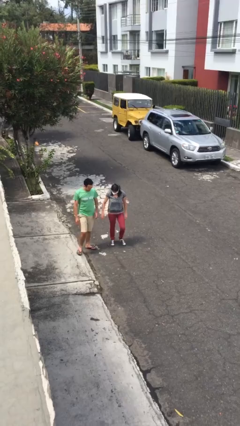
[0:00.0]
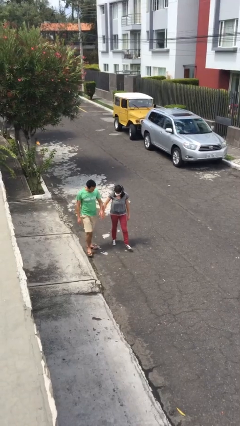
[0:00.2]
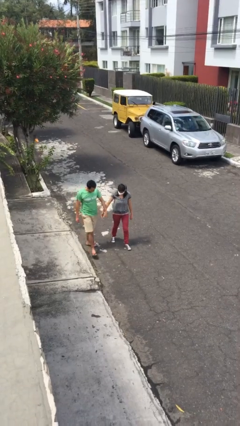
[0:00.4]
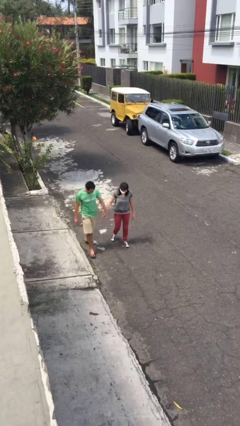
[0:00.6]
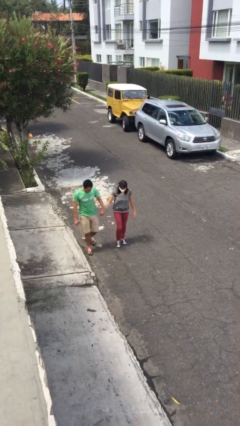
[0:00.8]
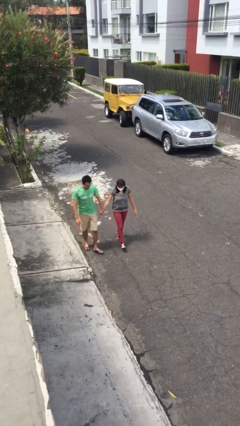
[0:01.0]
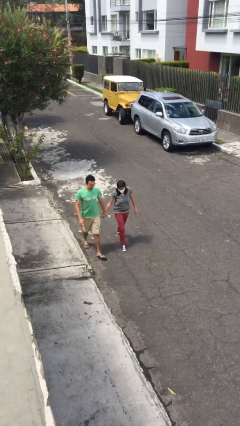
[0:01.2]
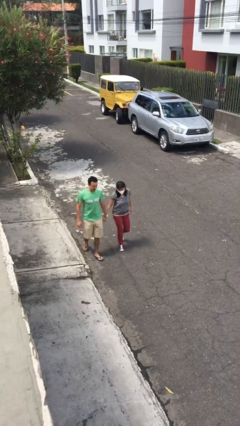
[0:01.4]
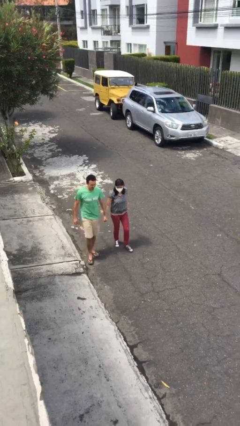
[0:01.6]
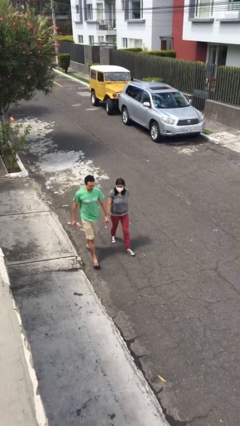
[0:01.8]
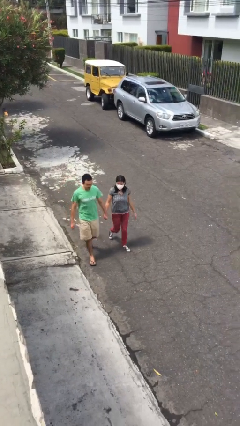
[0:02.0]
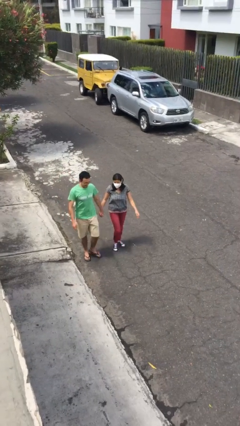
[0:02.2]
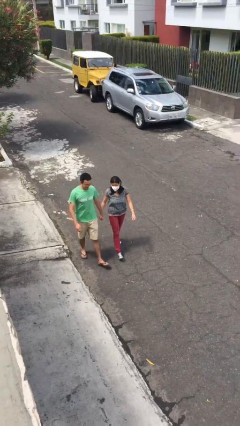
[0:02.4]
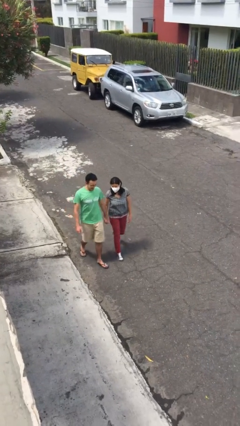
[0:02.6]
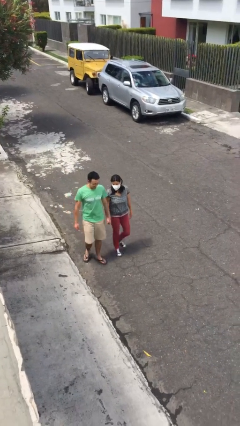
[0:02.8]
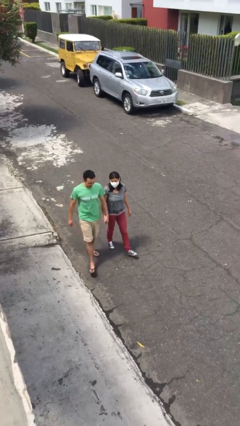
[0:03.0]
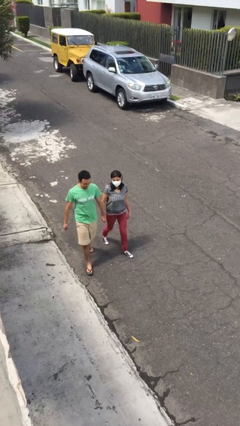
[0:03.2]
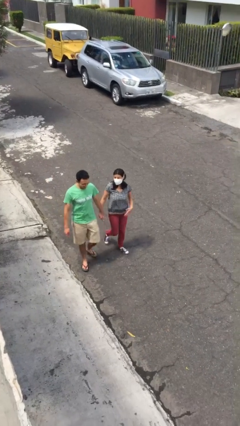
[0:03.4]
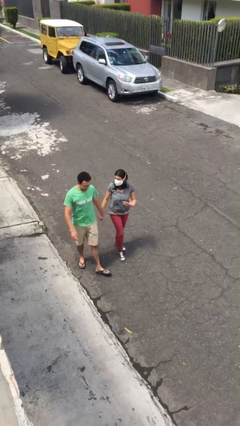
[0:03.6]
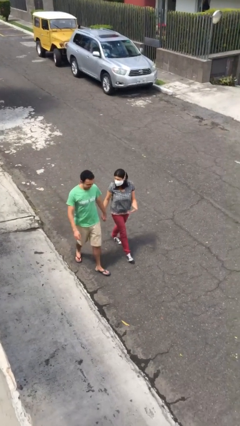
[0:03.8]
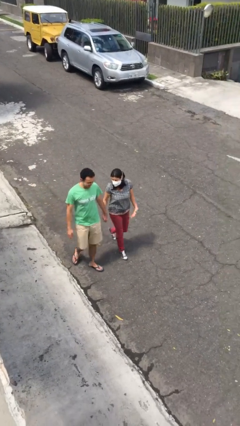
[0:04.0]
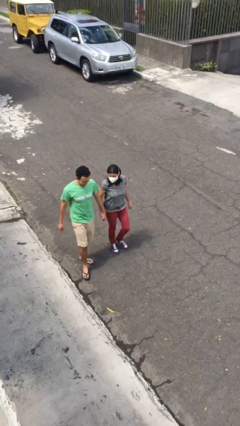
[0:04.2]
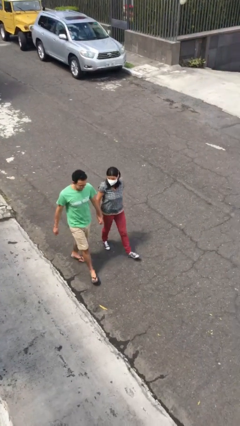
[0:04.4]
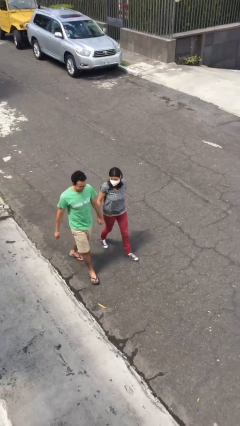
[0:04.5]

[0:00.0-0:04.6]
person holds hand

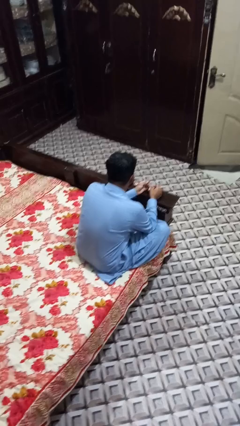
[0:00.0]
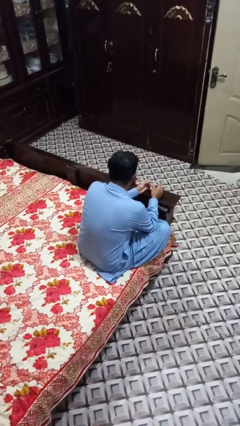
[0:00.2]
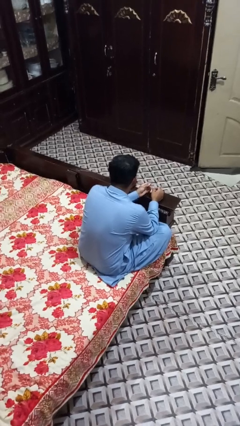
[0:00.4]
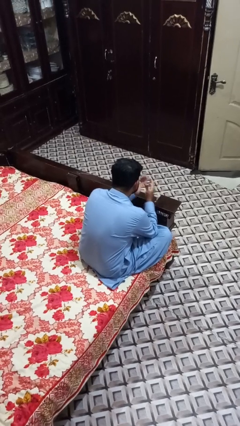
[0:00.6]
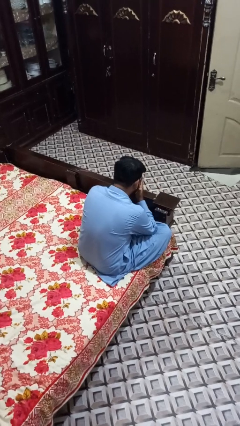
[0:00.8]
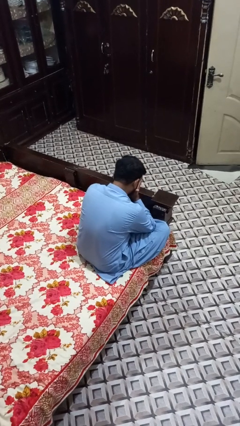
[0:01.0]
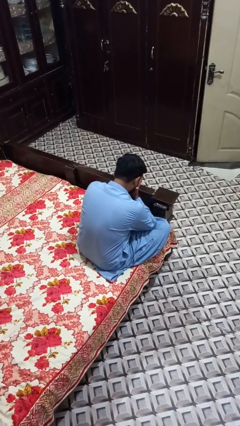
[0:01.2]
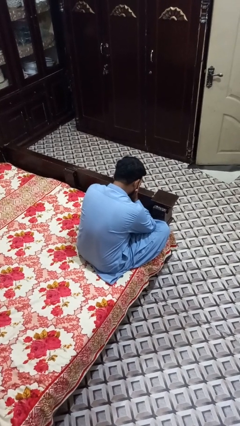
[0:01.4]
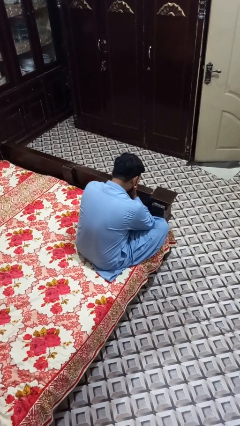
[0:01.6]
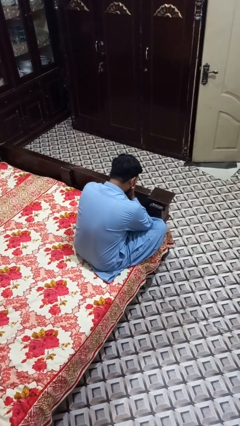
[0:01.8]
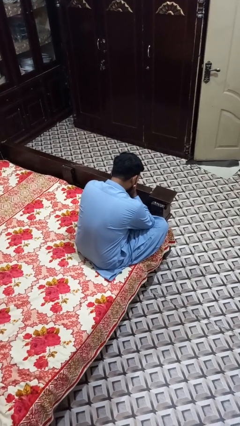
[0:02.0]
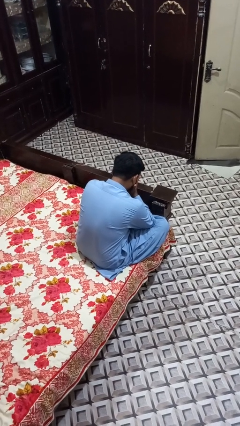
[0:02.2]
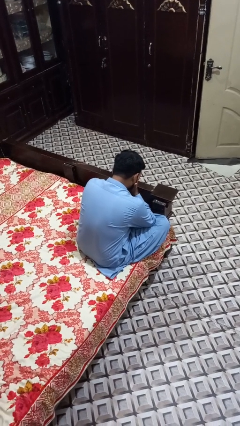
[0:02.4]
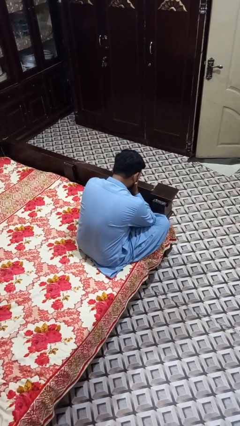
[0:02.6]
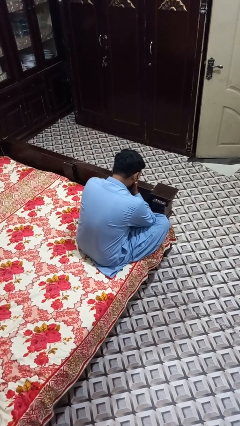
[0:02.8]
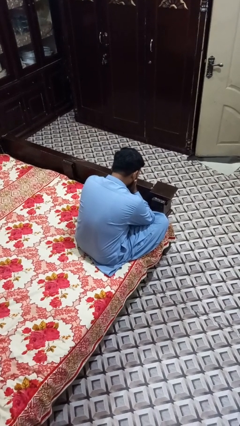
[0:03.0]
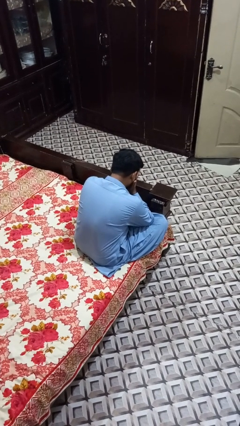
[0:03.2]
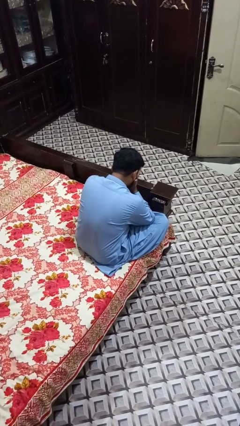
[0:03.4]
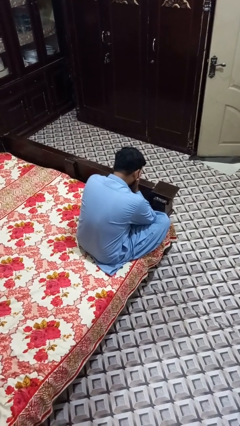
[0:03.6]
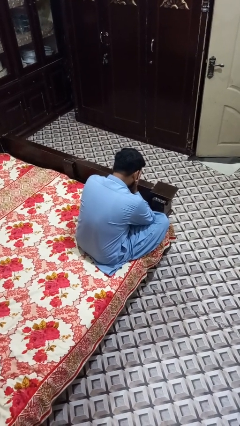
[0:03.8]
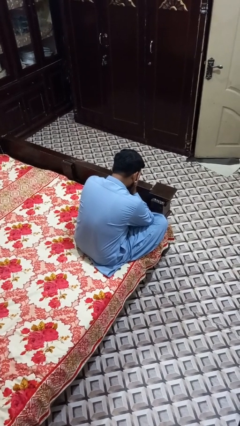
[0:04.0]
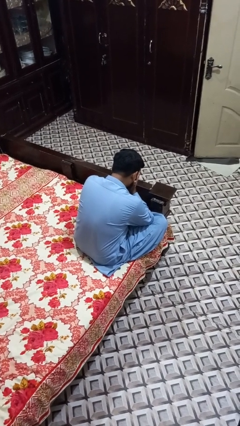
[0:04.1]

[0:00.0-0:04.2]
person covers face with hands

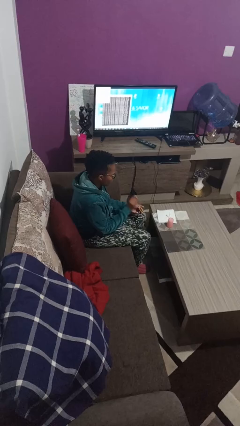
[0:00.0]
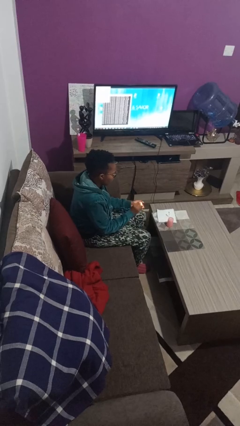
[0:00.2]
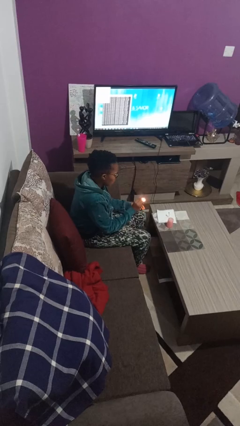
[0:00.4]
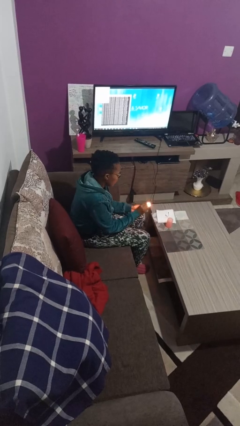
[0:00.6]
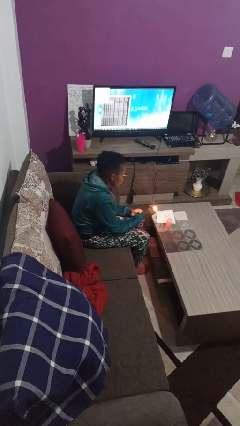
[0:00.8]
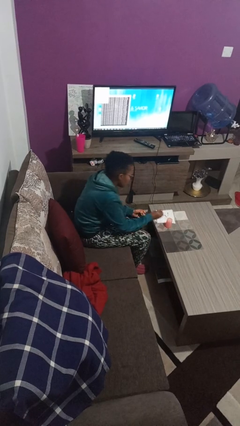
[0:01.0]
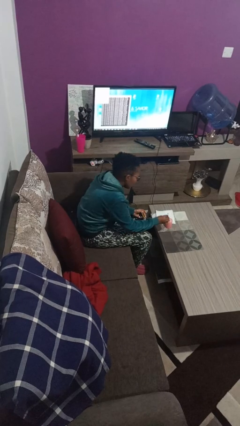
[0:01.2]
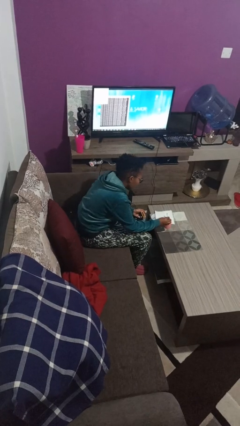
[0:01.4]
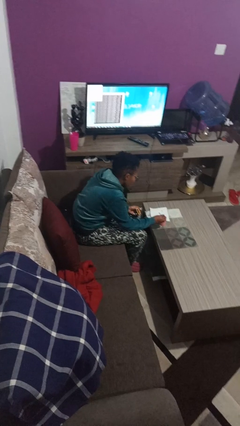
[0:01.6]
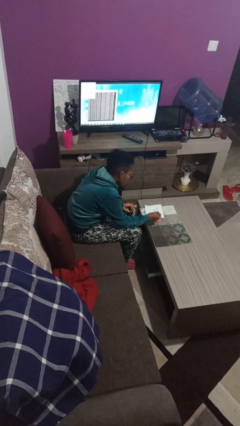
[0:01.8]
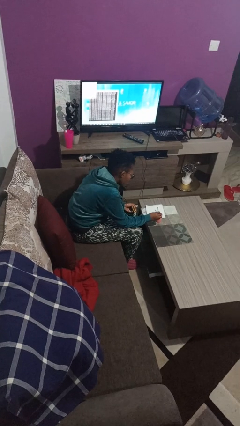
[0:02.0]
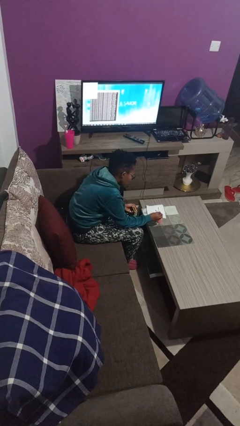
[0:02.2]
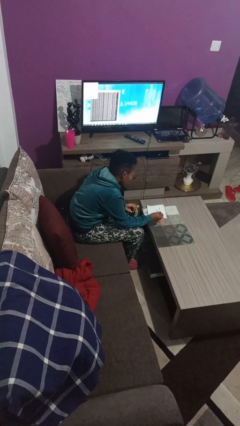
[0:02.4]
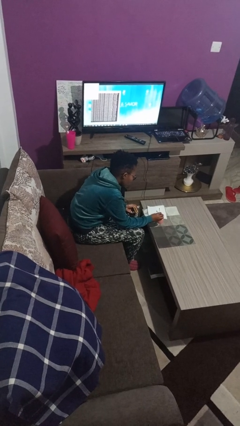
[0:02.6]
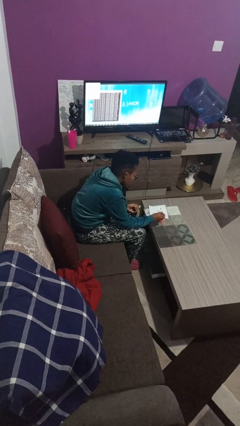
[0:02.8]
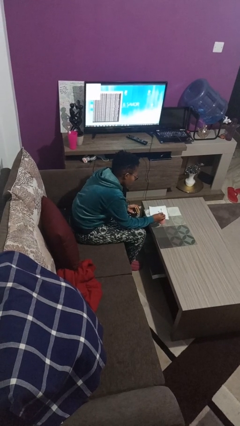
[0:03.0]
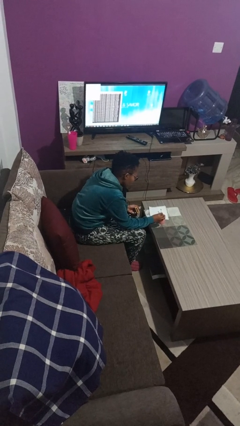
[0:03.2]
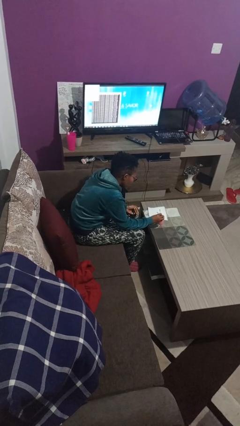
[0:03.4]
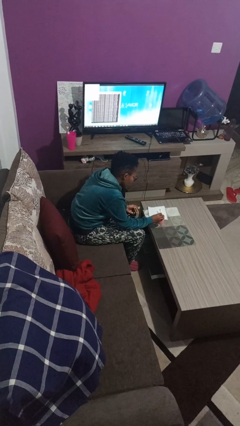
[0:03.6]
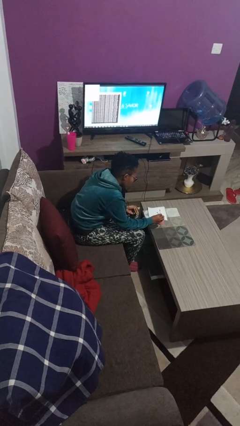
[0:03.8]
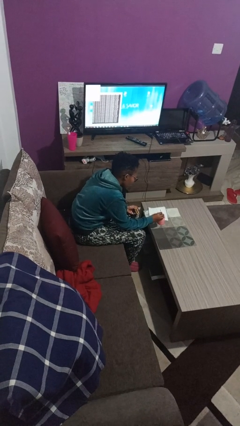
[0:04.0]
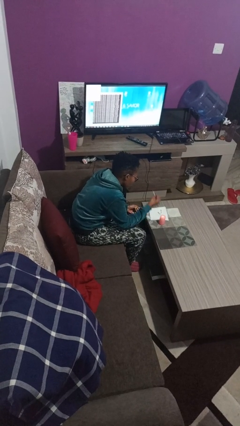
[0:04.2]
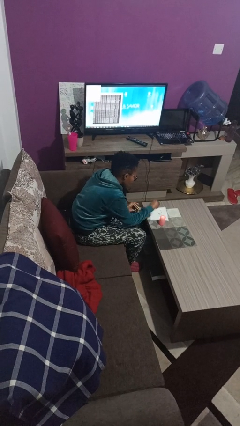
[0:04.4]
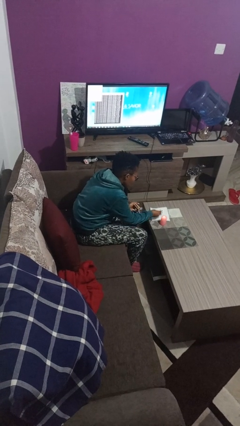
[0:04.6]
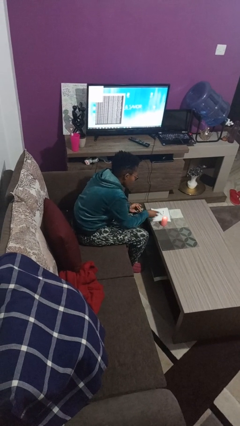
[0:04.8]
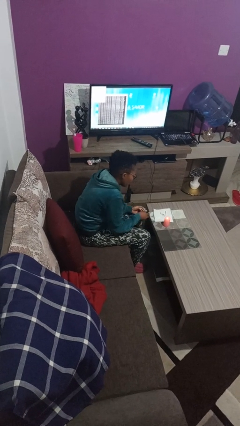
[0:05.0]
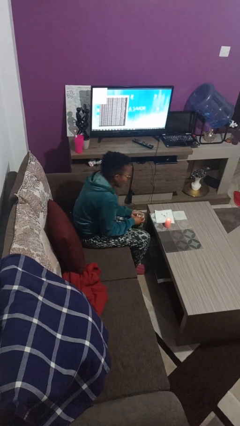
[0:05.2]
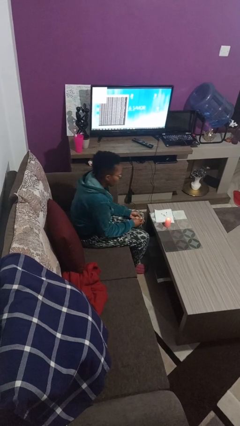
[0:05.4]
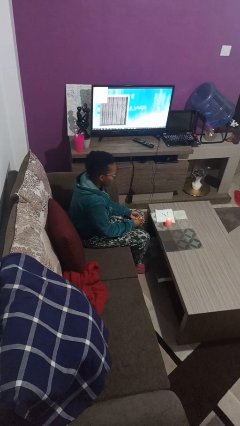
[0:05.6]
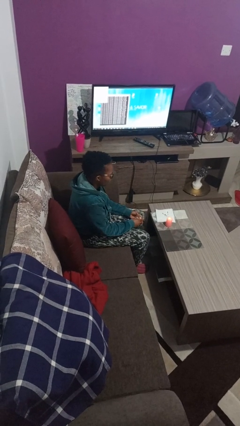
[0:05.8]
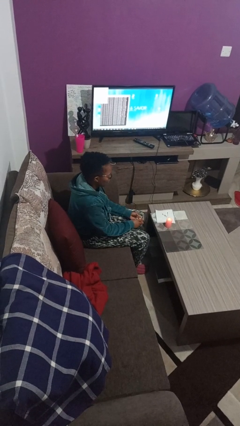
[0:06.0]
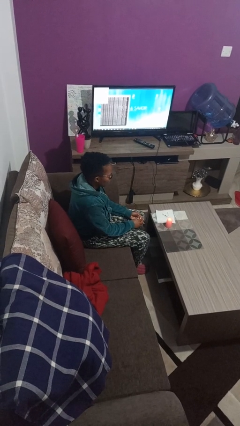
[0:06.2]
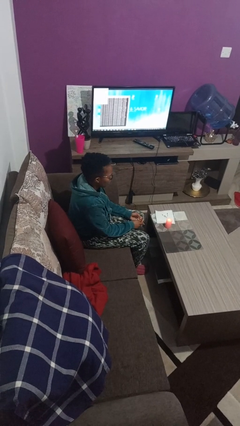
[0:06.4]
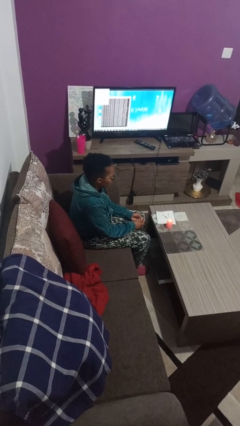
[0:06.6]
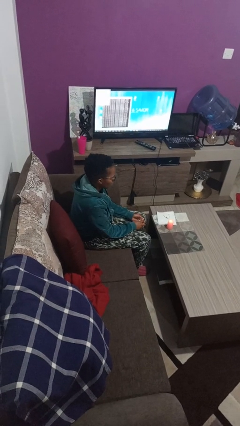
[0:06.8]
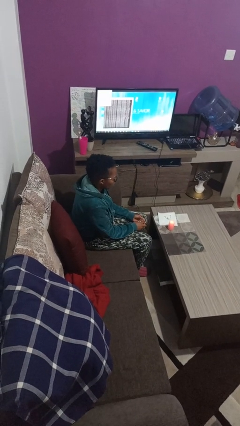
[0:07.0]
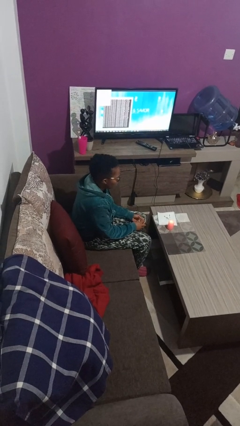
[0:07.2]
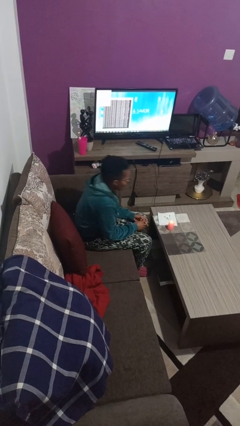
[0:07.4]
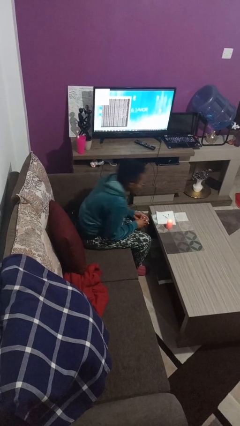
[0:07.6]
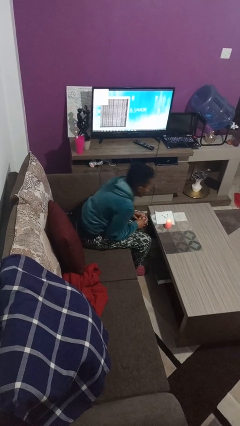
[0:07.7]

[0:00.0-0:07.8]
person lights candle

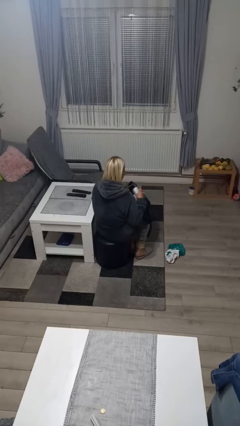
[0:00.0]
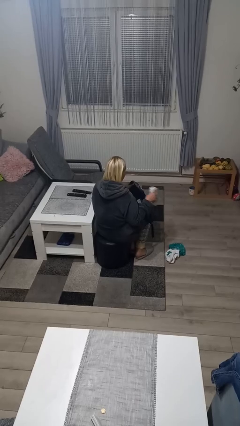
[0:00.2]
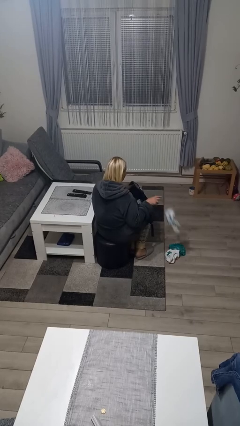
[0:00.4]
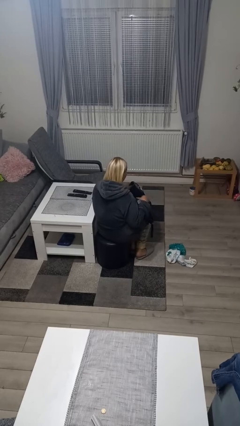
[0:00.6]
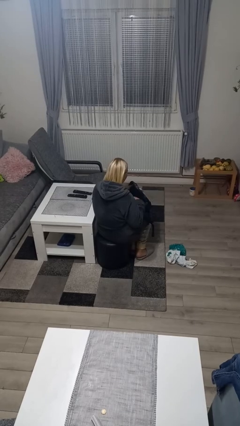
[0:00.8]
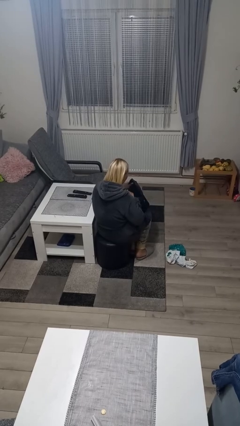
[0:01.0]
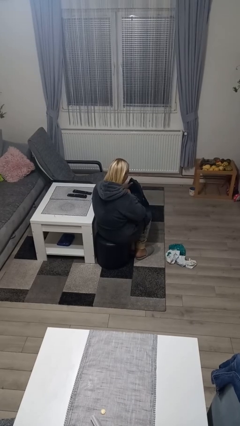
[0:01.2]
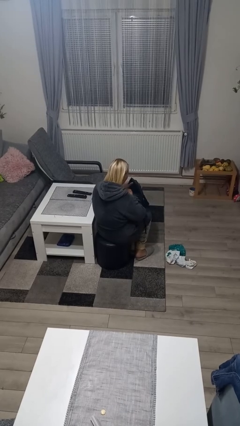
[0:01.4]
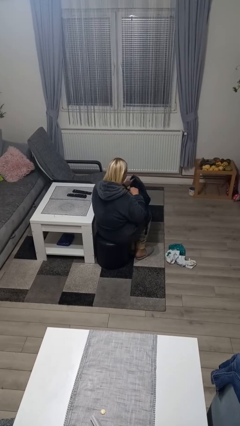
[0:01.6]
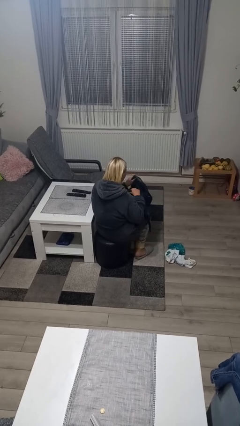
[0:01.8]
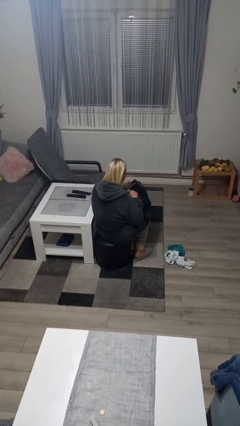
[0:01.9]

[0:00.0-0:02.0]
person searches in bag
